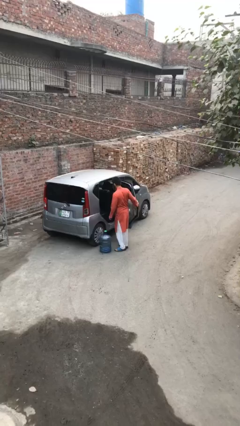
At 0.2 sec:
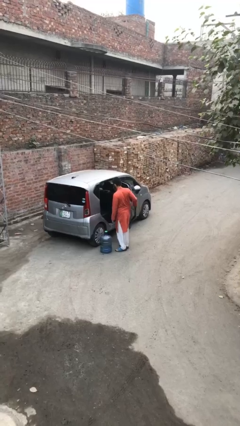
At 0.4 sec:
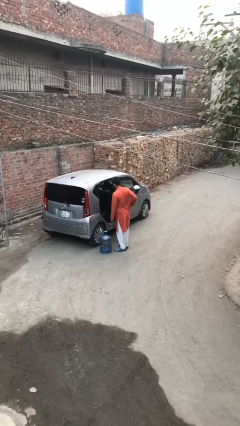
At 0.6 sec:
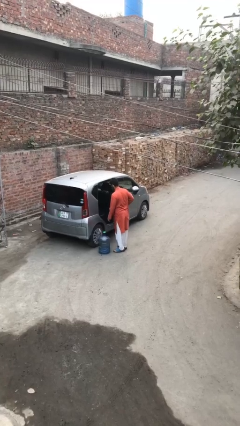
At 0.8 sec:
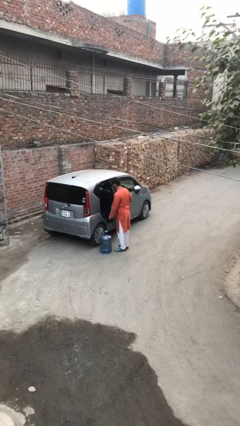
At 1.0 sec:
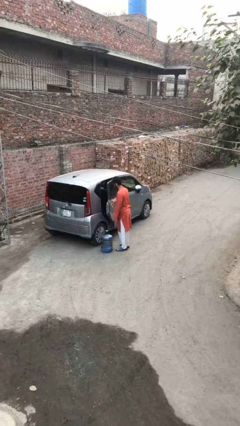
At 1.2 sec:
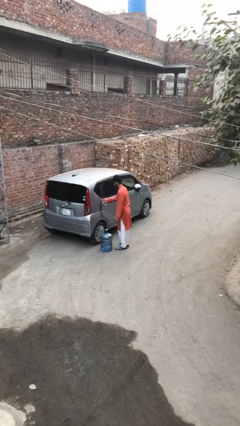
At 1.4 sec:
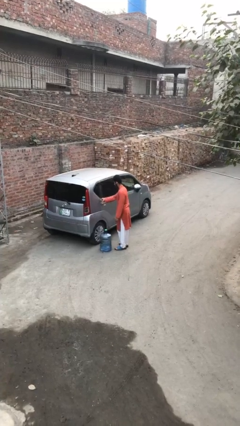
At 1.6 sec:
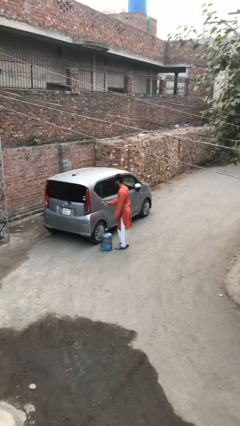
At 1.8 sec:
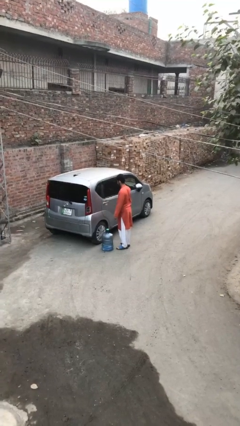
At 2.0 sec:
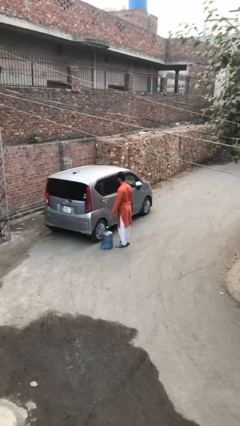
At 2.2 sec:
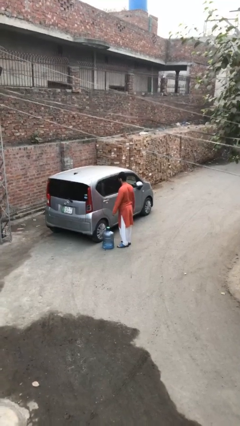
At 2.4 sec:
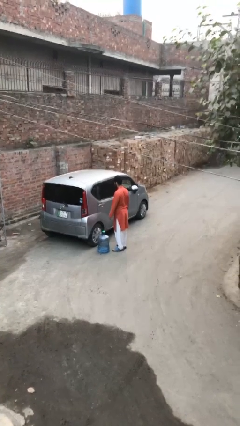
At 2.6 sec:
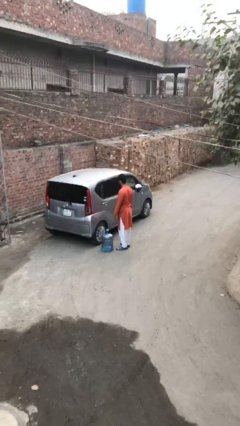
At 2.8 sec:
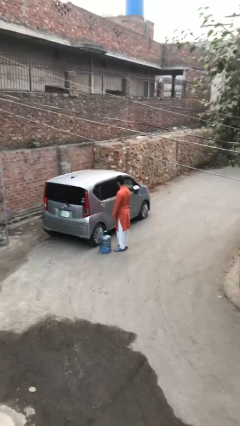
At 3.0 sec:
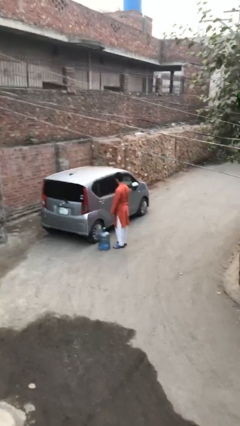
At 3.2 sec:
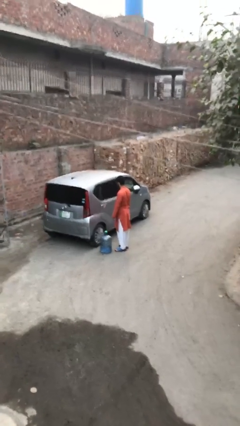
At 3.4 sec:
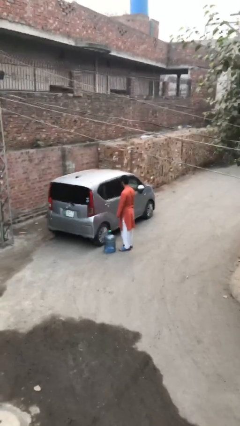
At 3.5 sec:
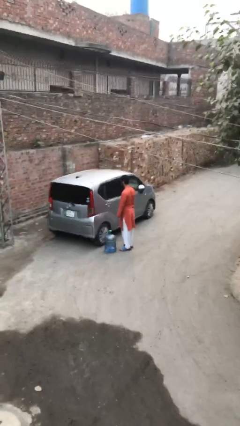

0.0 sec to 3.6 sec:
person closes car door

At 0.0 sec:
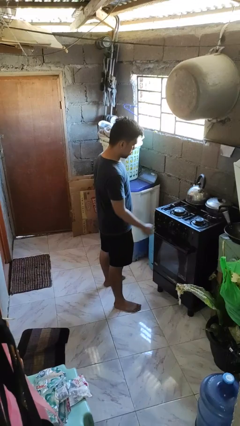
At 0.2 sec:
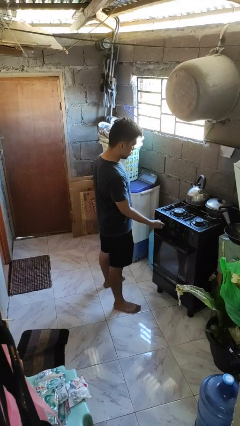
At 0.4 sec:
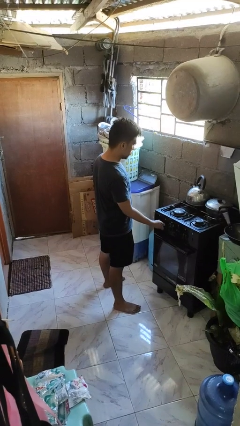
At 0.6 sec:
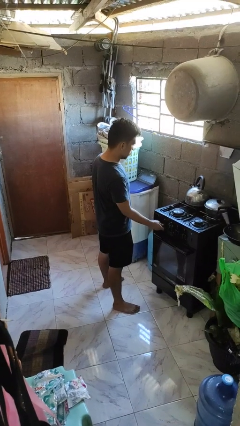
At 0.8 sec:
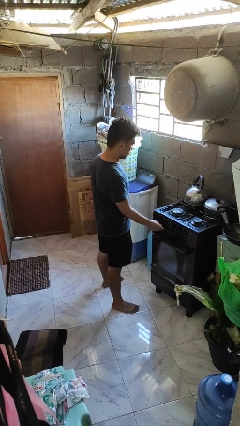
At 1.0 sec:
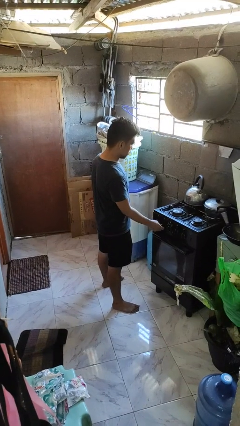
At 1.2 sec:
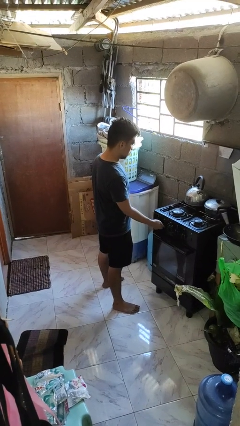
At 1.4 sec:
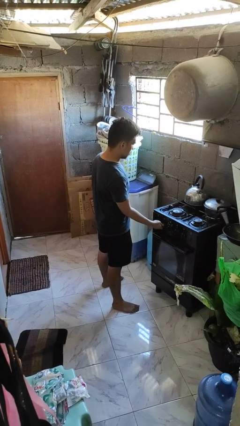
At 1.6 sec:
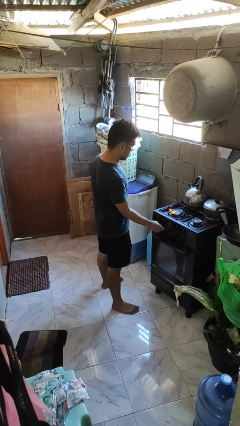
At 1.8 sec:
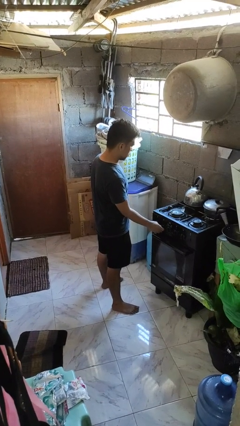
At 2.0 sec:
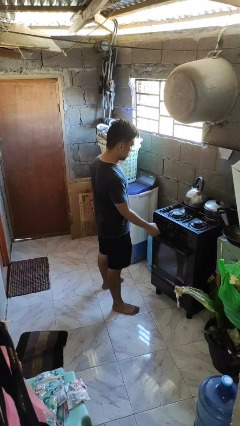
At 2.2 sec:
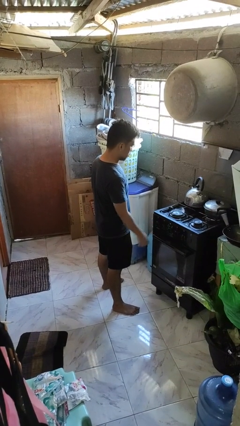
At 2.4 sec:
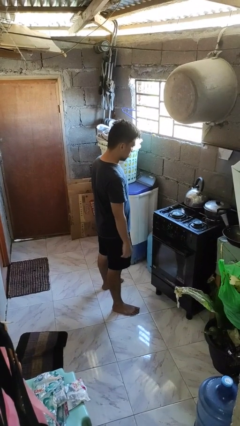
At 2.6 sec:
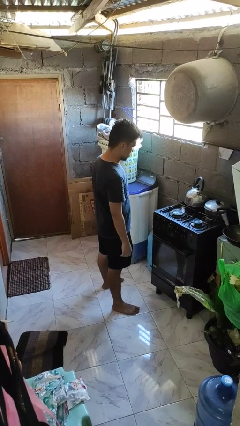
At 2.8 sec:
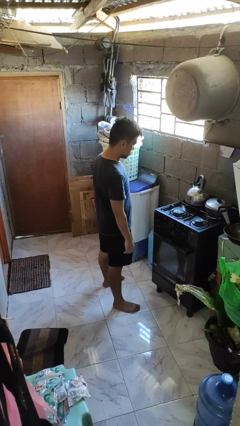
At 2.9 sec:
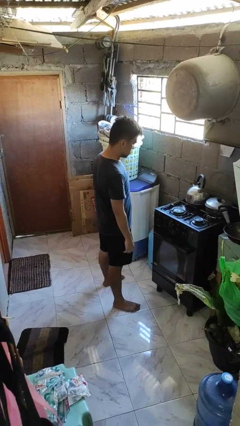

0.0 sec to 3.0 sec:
person turns on stovetop

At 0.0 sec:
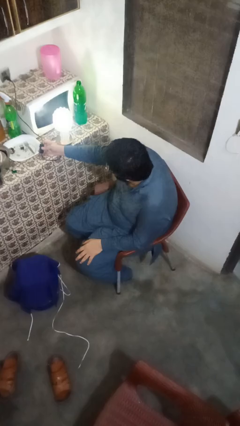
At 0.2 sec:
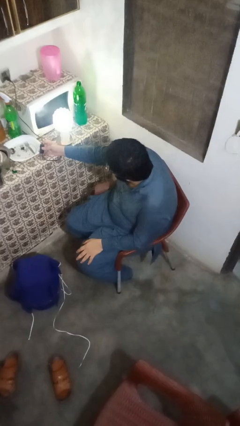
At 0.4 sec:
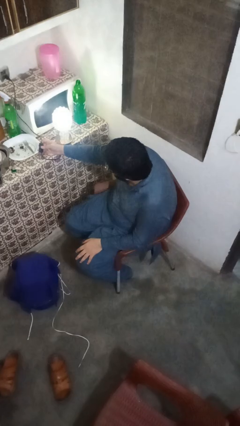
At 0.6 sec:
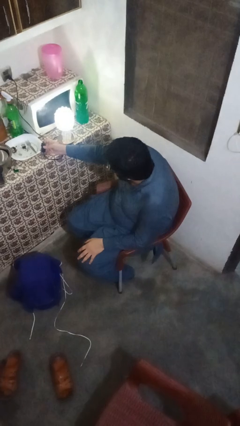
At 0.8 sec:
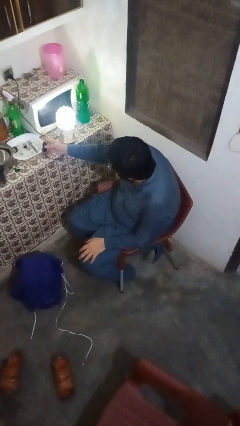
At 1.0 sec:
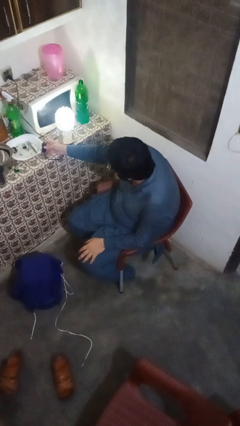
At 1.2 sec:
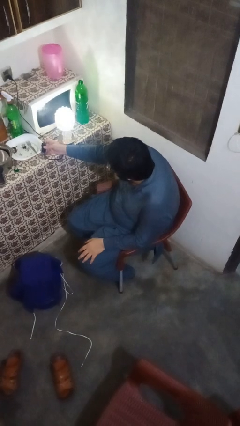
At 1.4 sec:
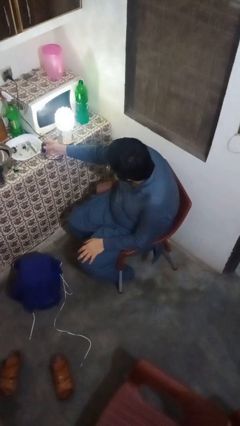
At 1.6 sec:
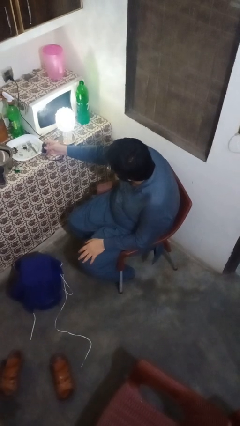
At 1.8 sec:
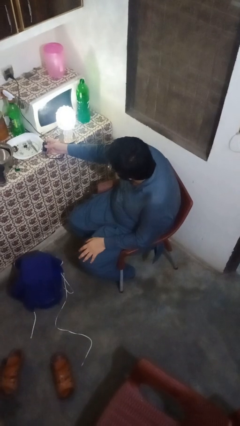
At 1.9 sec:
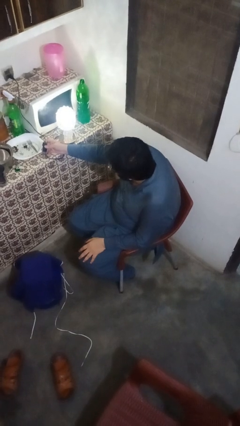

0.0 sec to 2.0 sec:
person turns on lamp

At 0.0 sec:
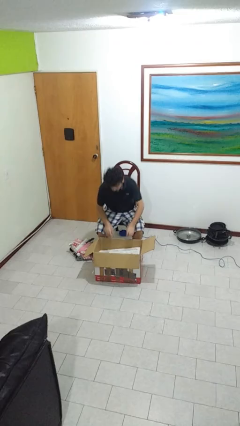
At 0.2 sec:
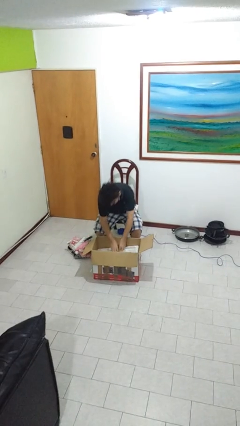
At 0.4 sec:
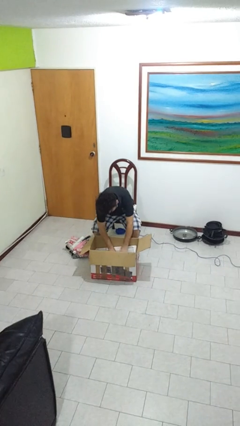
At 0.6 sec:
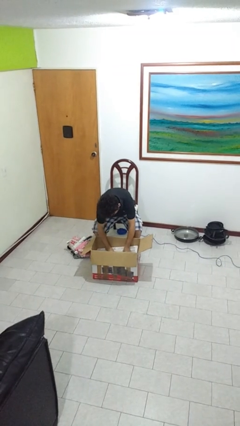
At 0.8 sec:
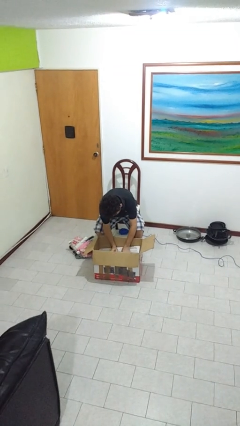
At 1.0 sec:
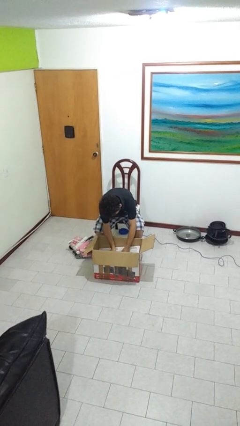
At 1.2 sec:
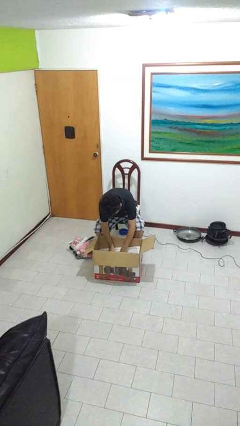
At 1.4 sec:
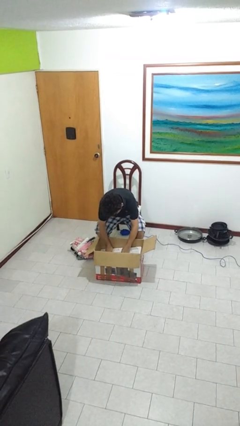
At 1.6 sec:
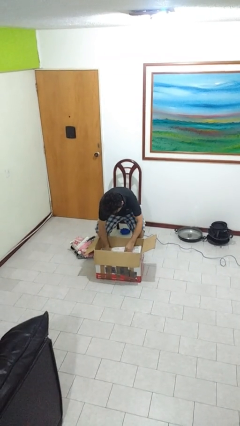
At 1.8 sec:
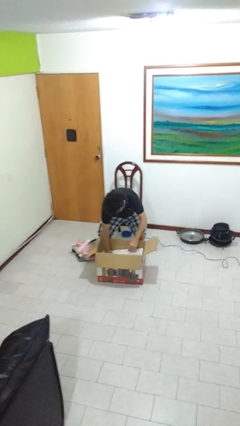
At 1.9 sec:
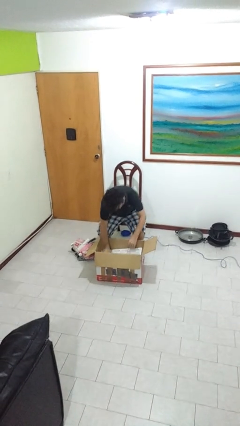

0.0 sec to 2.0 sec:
person searches in box

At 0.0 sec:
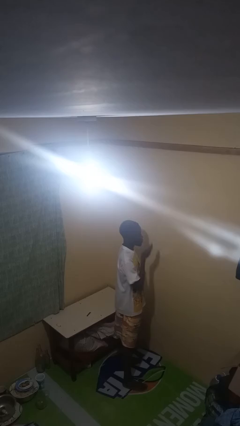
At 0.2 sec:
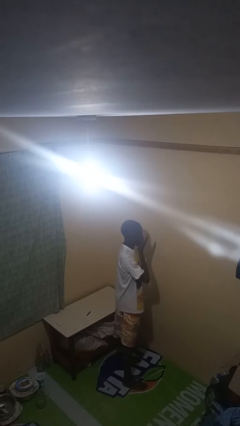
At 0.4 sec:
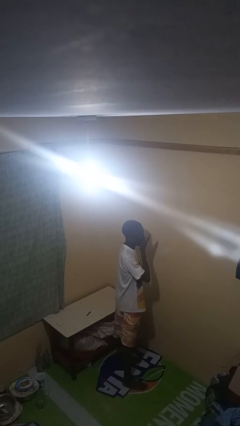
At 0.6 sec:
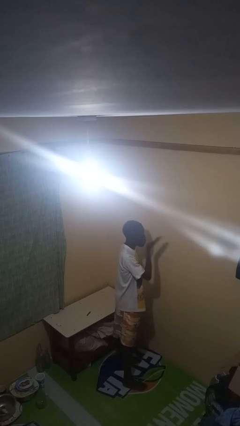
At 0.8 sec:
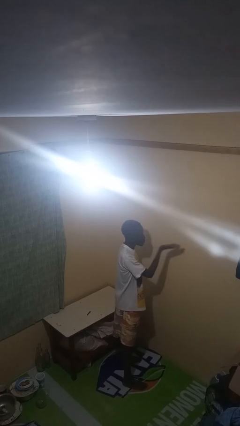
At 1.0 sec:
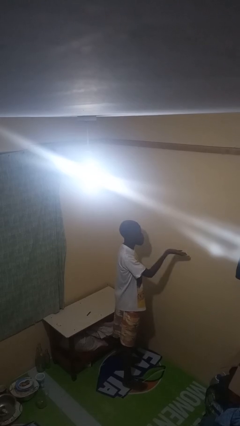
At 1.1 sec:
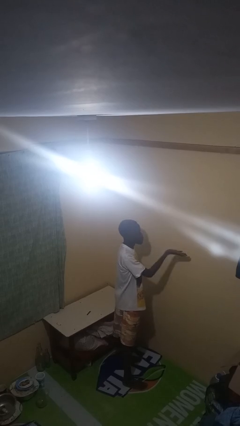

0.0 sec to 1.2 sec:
person gestures blow kiss

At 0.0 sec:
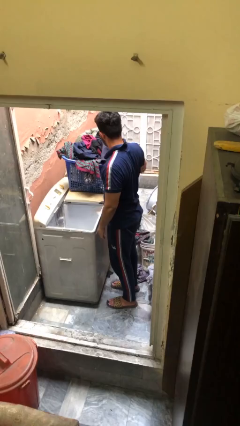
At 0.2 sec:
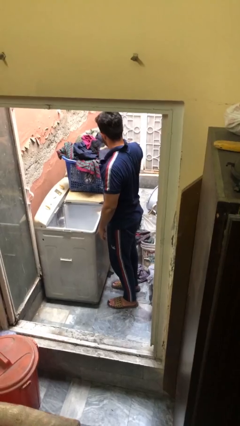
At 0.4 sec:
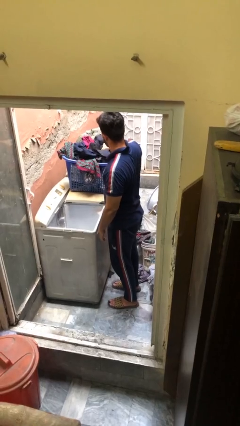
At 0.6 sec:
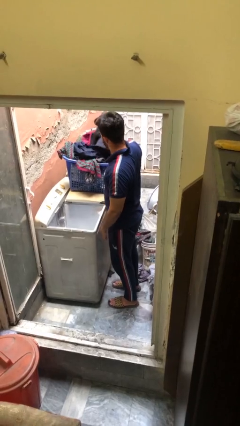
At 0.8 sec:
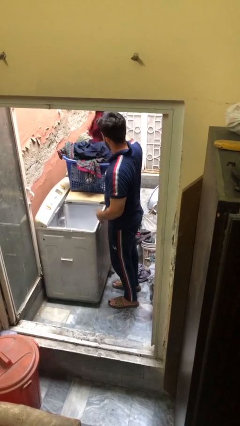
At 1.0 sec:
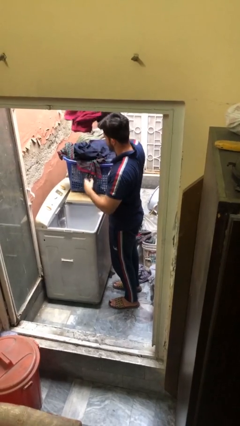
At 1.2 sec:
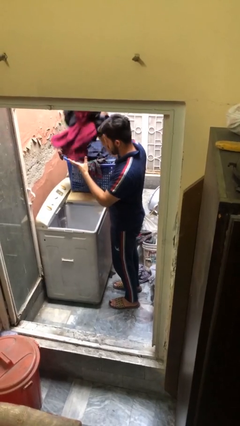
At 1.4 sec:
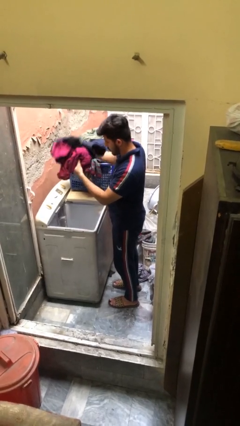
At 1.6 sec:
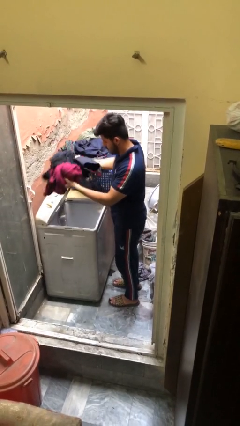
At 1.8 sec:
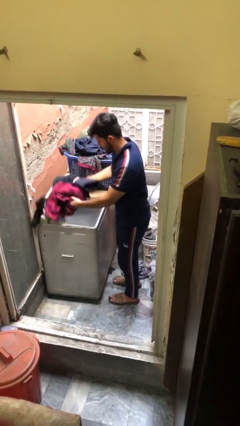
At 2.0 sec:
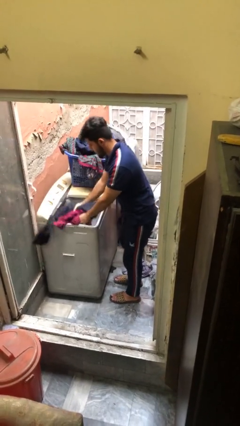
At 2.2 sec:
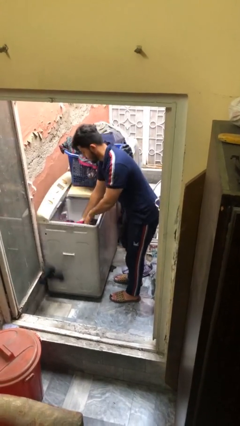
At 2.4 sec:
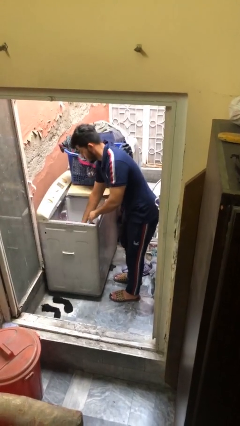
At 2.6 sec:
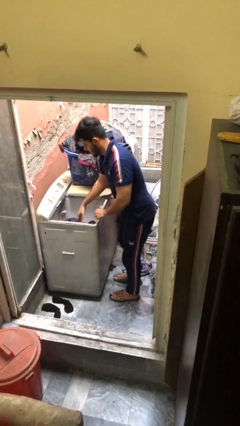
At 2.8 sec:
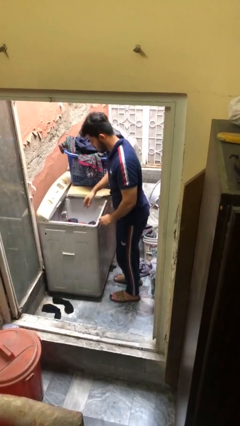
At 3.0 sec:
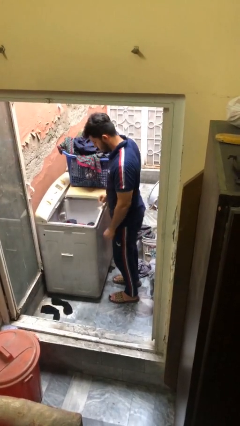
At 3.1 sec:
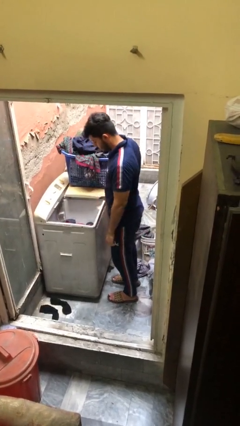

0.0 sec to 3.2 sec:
person loads clotheswasher

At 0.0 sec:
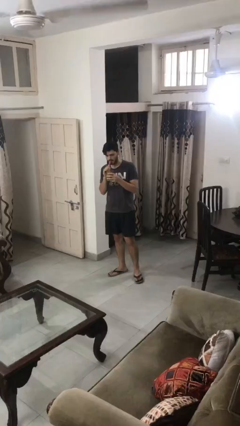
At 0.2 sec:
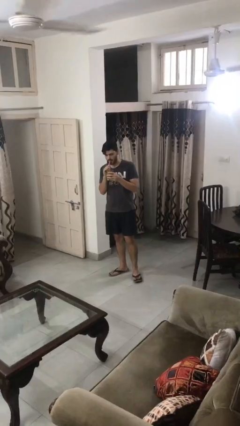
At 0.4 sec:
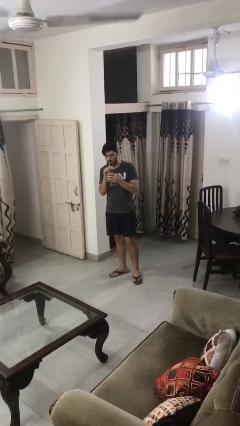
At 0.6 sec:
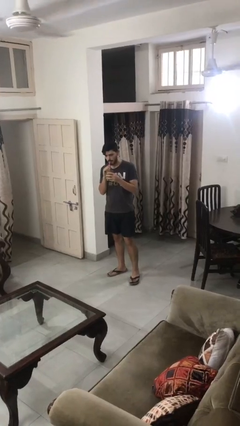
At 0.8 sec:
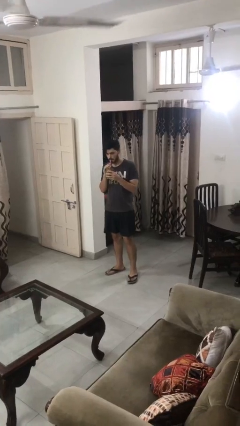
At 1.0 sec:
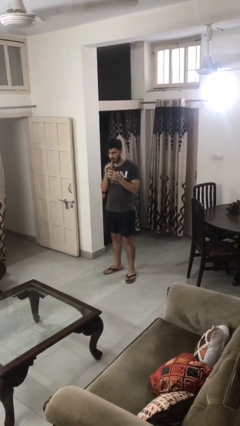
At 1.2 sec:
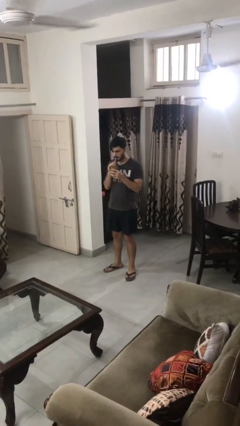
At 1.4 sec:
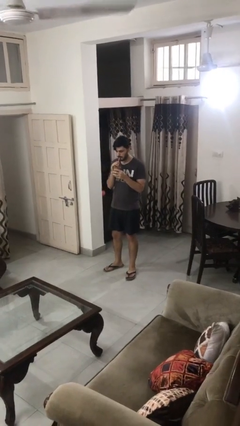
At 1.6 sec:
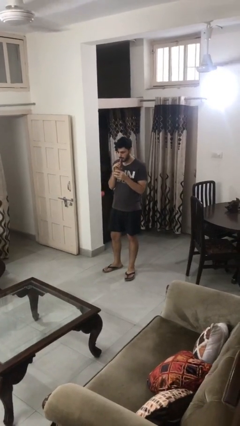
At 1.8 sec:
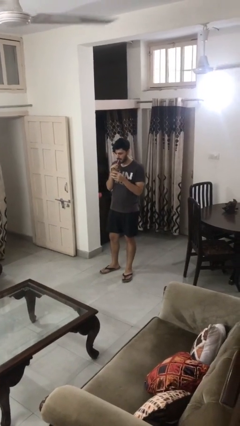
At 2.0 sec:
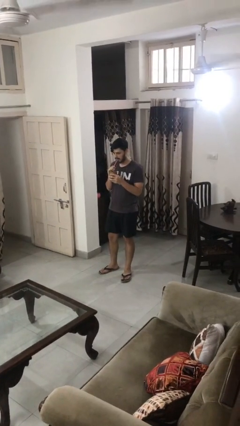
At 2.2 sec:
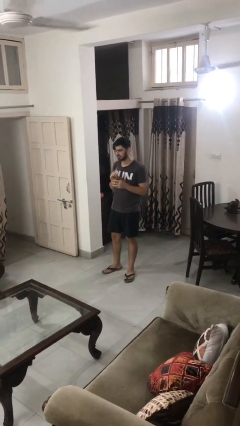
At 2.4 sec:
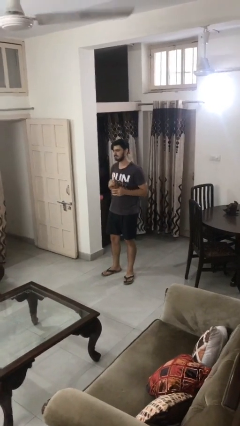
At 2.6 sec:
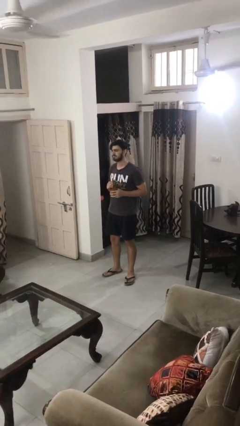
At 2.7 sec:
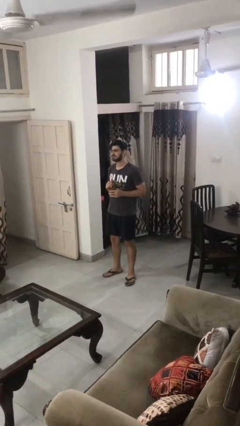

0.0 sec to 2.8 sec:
person drinks from straw
